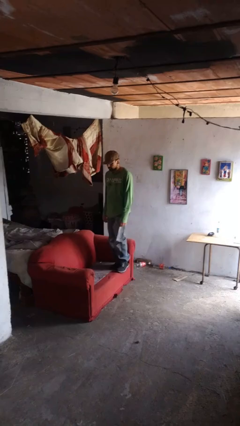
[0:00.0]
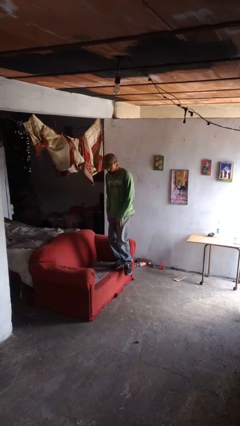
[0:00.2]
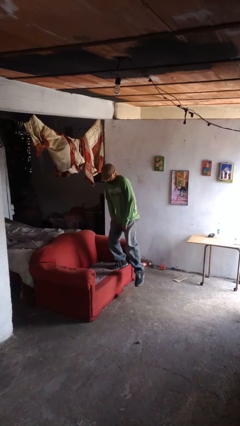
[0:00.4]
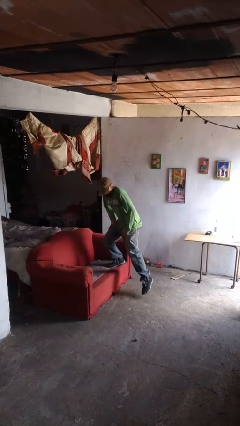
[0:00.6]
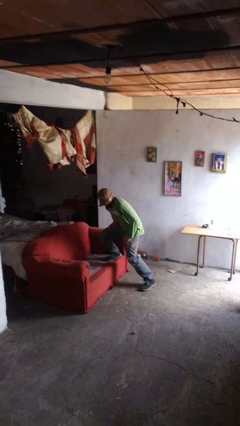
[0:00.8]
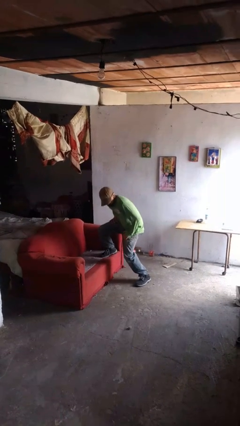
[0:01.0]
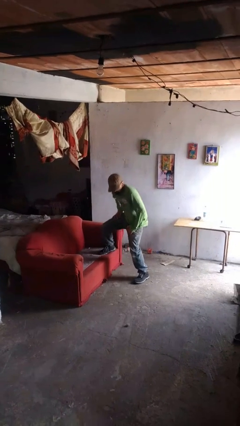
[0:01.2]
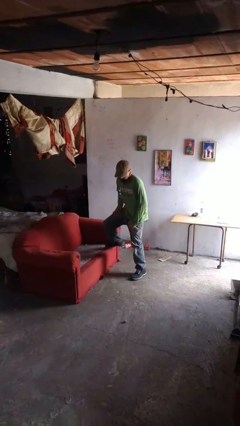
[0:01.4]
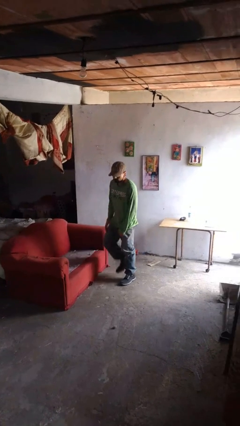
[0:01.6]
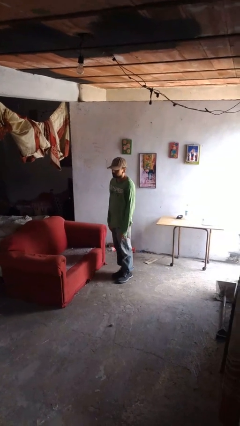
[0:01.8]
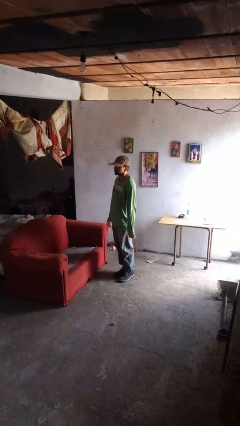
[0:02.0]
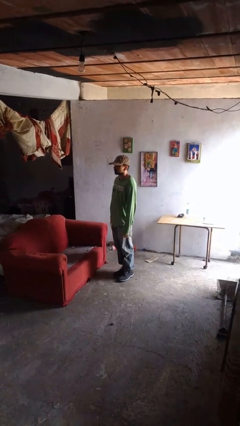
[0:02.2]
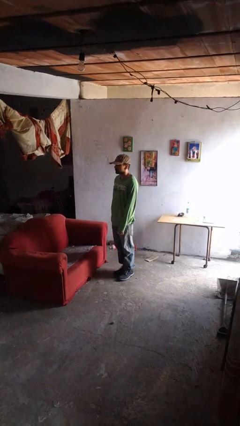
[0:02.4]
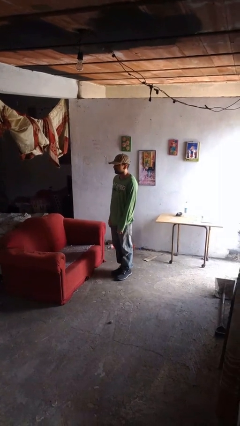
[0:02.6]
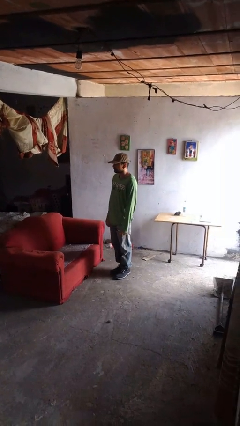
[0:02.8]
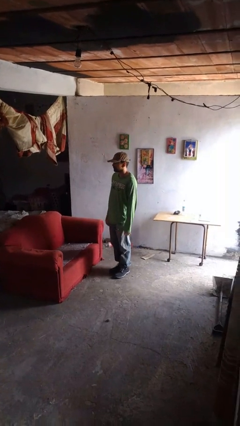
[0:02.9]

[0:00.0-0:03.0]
person climbs off couch

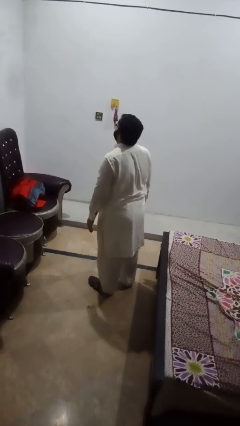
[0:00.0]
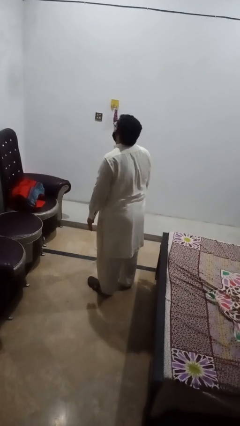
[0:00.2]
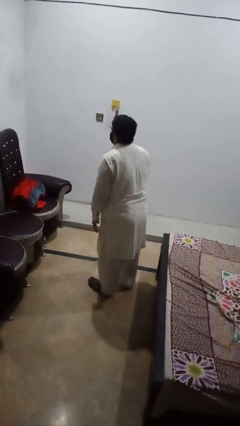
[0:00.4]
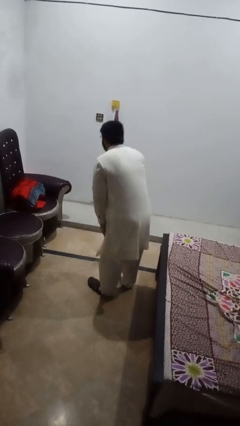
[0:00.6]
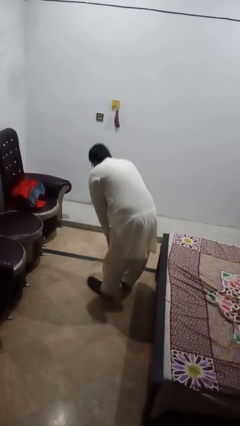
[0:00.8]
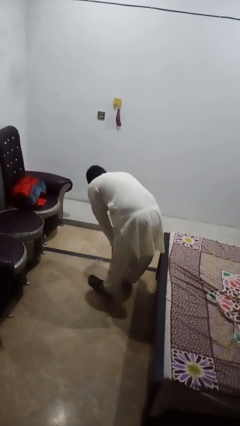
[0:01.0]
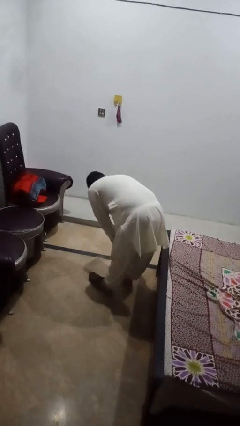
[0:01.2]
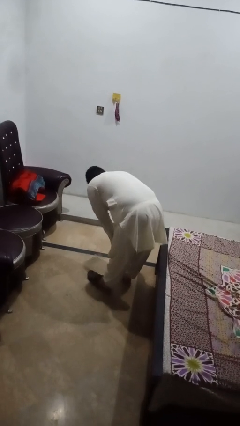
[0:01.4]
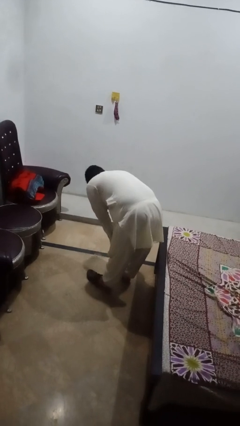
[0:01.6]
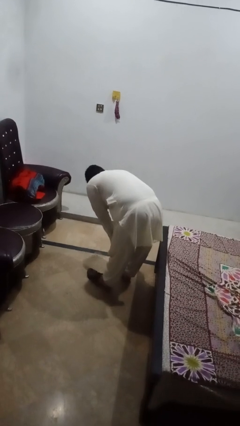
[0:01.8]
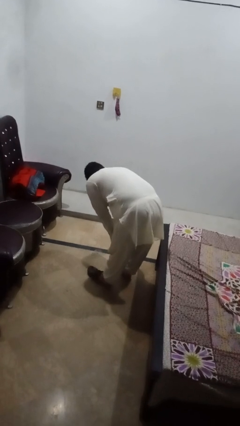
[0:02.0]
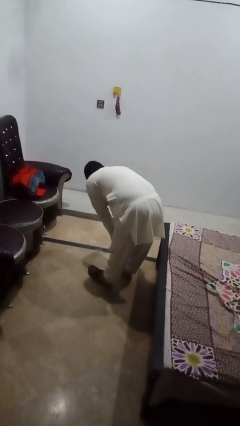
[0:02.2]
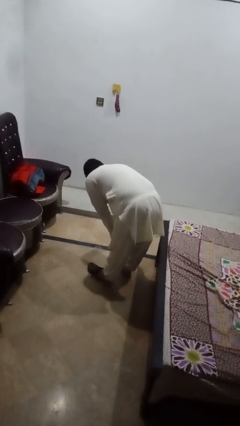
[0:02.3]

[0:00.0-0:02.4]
person squats

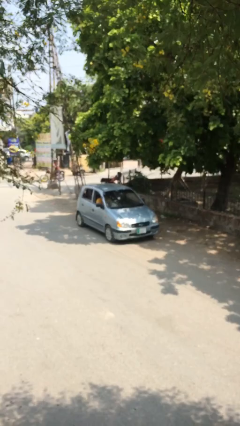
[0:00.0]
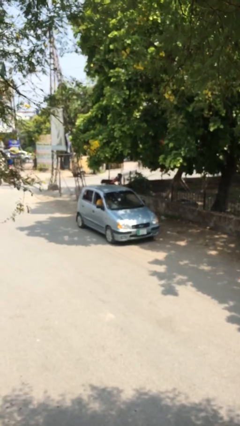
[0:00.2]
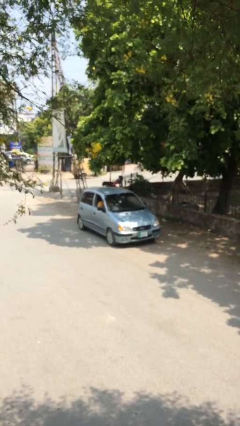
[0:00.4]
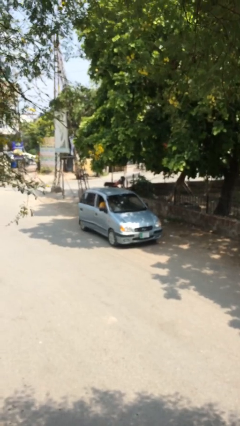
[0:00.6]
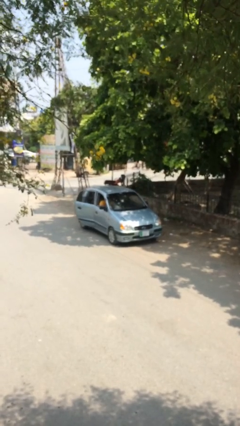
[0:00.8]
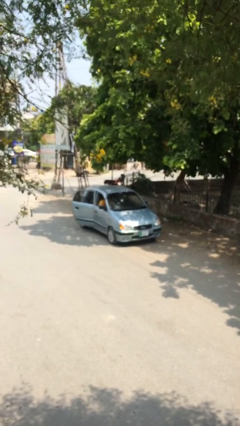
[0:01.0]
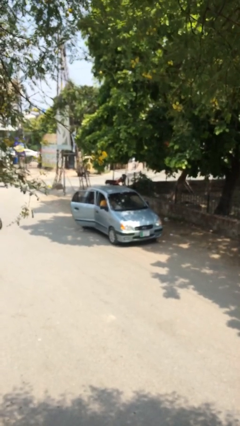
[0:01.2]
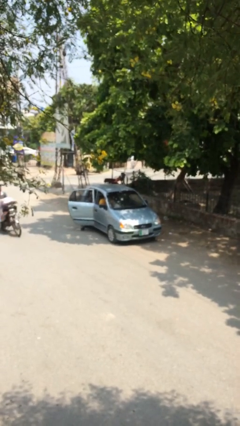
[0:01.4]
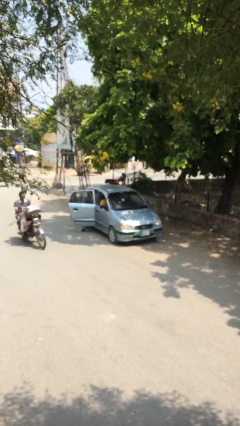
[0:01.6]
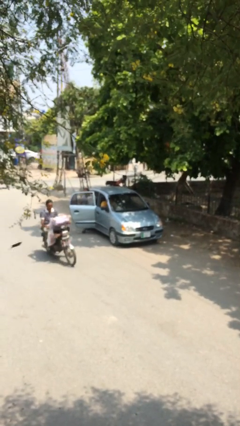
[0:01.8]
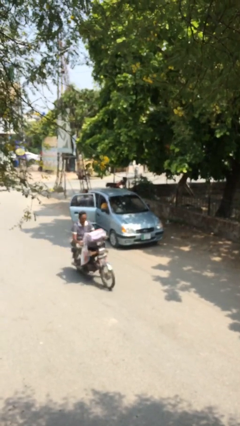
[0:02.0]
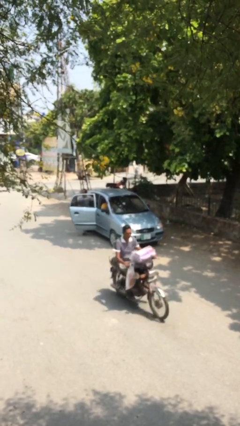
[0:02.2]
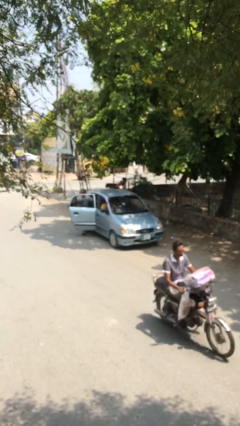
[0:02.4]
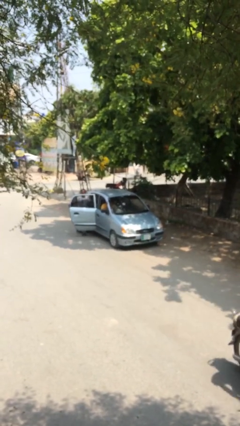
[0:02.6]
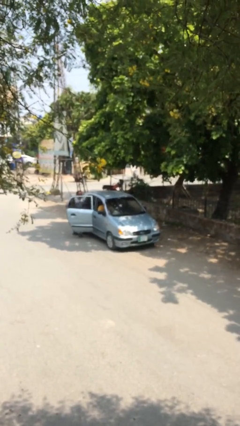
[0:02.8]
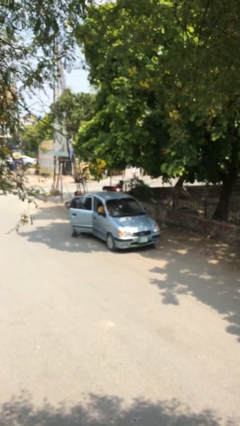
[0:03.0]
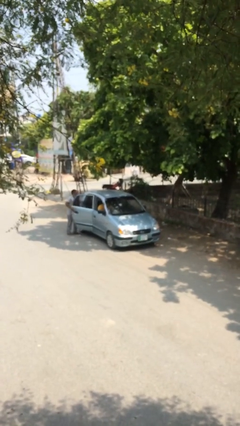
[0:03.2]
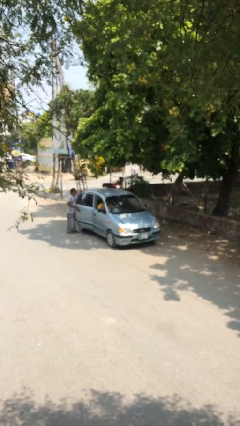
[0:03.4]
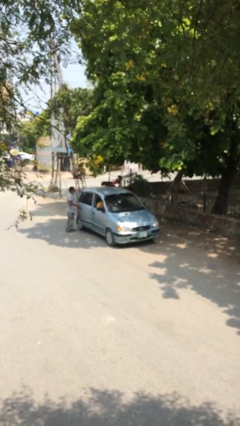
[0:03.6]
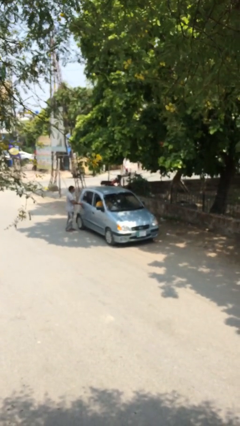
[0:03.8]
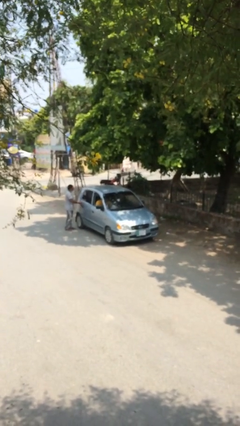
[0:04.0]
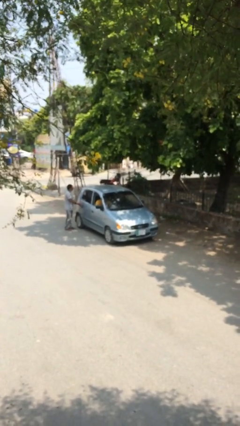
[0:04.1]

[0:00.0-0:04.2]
car drops off person

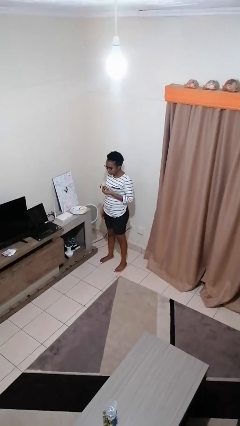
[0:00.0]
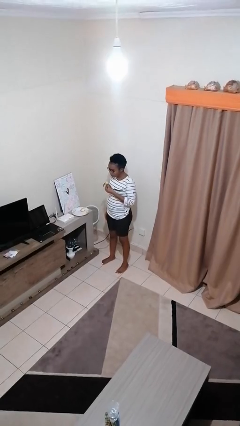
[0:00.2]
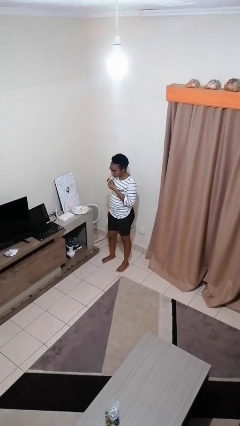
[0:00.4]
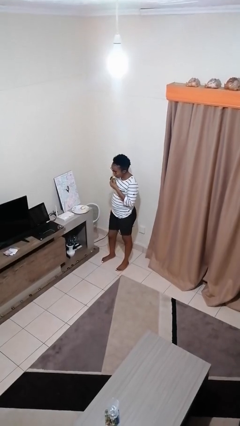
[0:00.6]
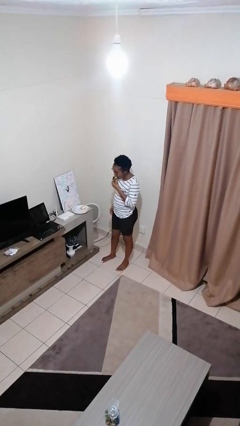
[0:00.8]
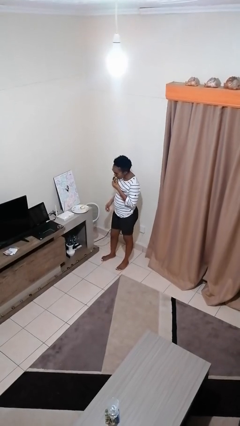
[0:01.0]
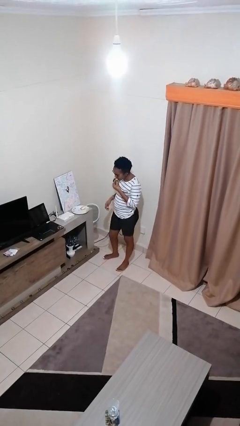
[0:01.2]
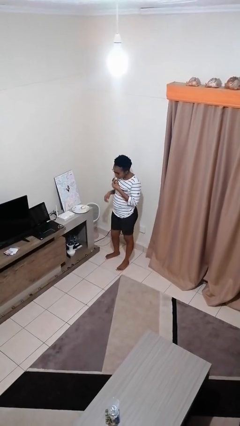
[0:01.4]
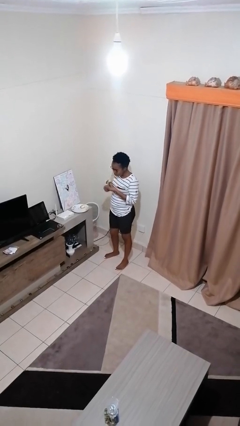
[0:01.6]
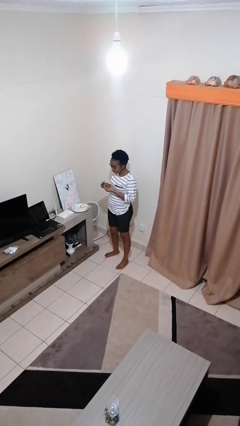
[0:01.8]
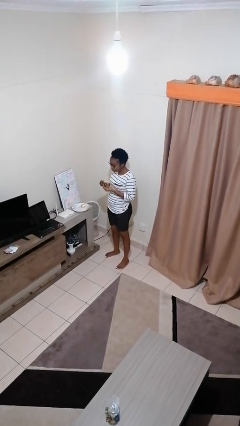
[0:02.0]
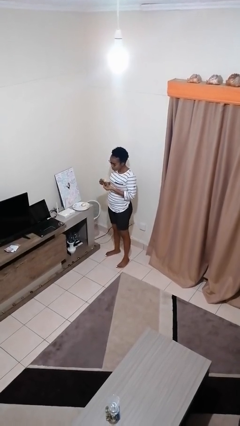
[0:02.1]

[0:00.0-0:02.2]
person eats banana

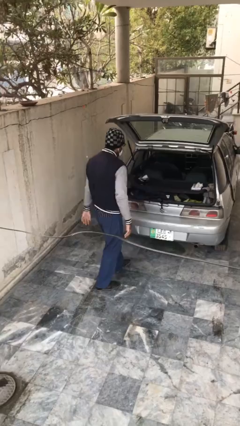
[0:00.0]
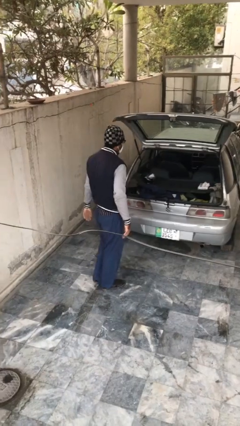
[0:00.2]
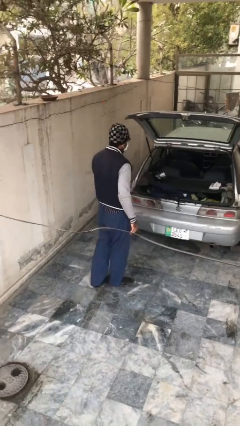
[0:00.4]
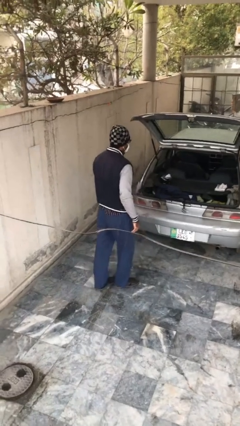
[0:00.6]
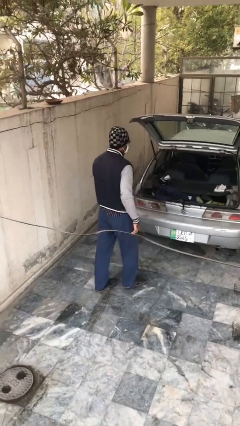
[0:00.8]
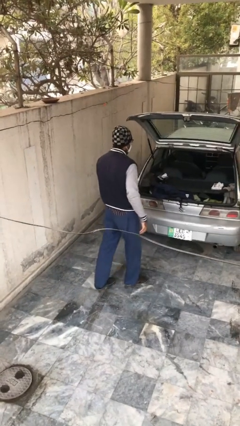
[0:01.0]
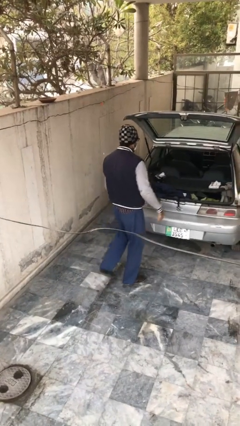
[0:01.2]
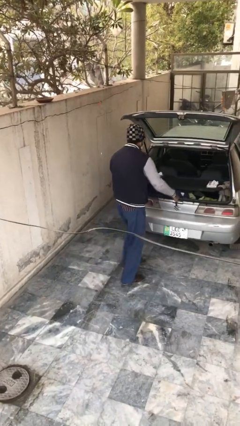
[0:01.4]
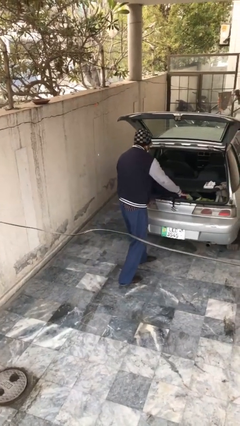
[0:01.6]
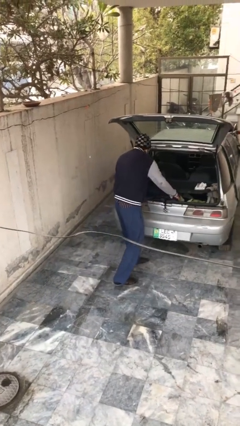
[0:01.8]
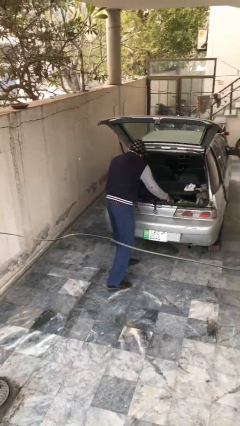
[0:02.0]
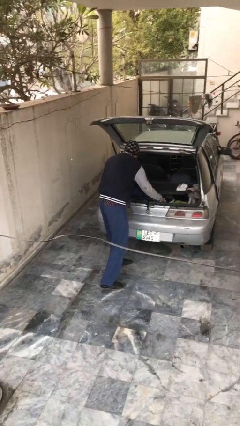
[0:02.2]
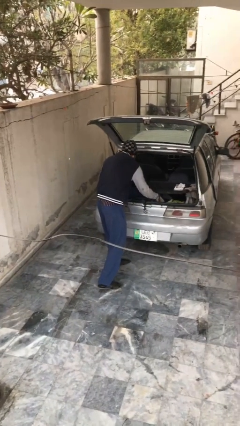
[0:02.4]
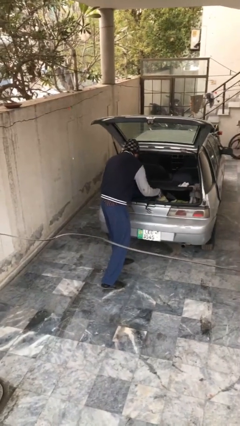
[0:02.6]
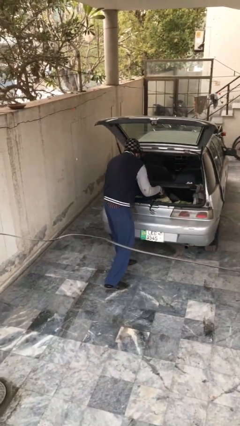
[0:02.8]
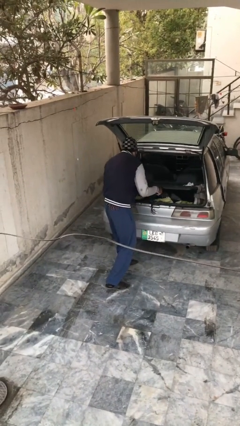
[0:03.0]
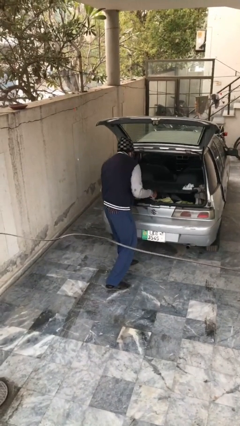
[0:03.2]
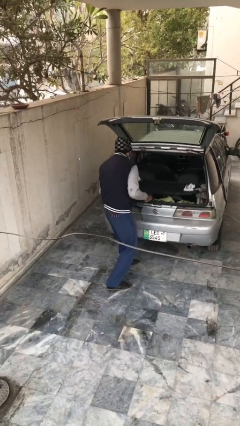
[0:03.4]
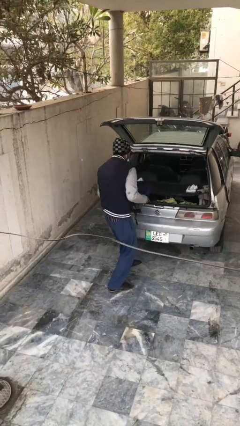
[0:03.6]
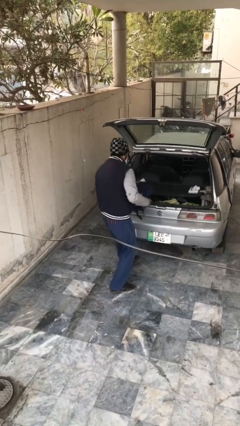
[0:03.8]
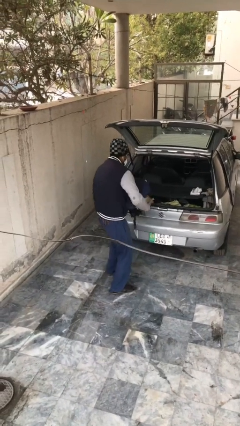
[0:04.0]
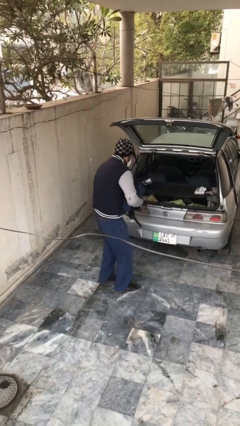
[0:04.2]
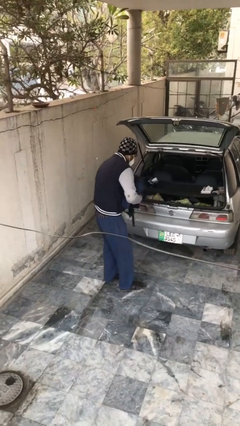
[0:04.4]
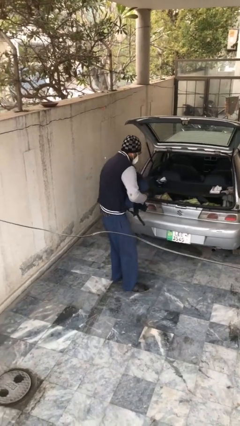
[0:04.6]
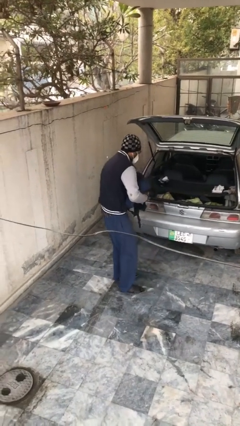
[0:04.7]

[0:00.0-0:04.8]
person unloads car

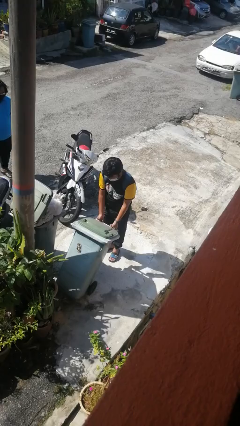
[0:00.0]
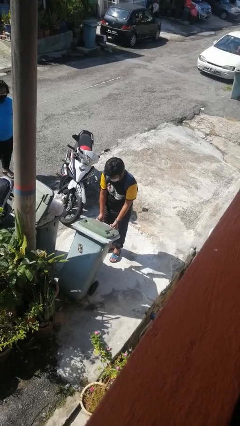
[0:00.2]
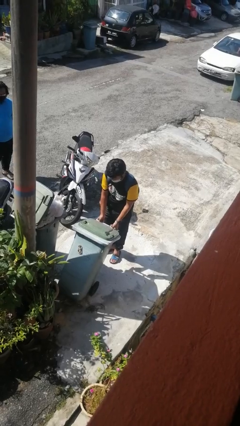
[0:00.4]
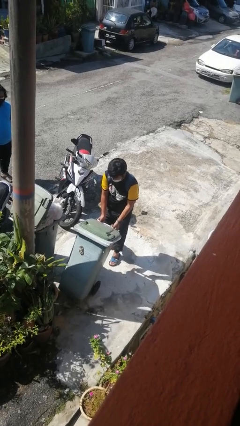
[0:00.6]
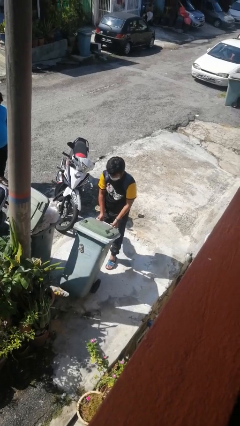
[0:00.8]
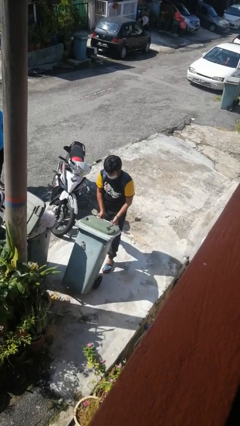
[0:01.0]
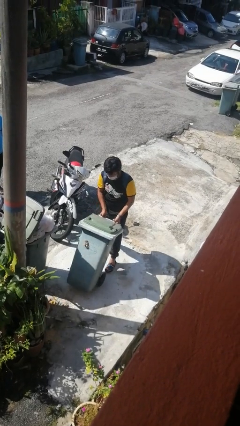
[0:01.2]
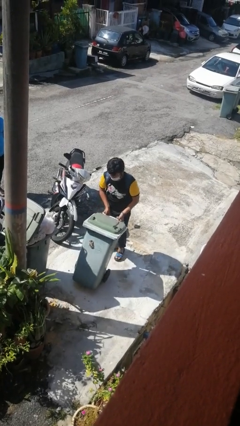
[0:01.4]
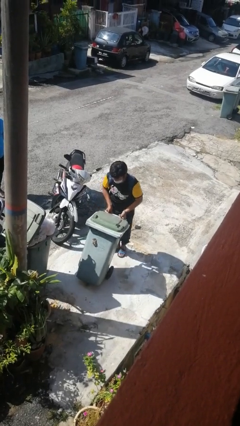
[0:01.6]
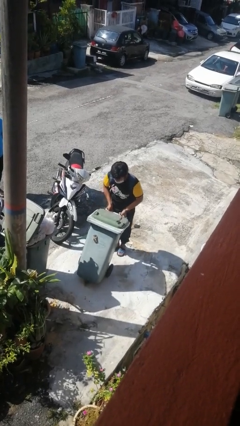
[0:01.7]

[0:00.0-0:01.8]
person pulls wheeled trashcan
